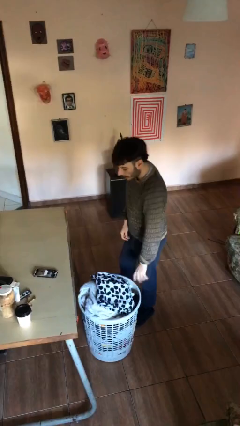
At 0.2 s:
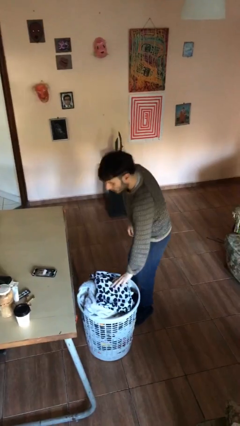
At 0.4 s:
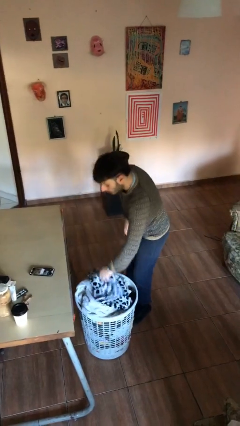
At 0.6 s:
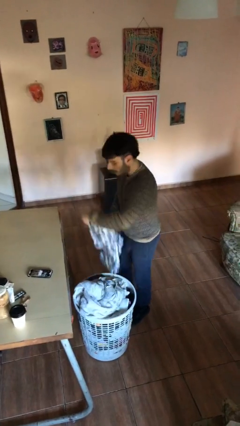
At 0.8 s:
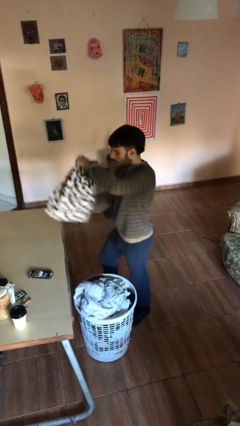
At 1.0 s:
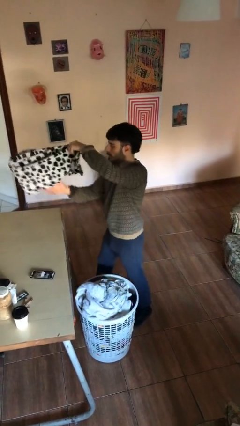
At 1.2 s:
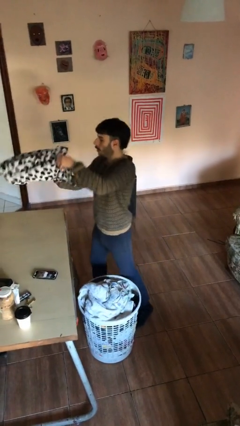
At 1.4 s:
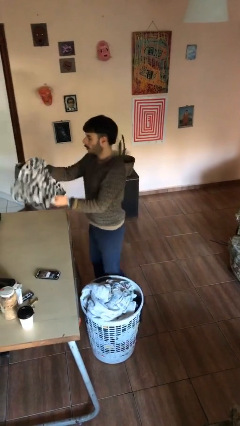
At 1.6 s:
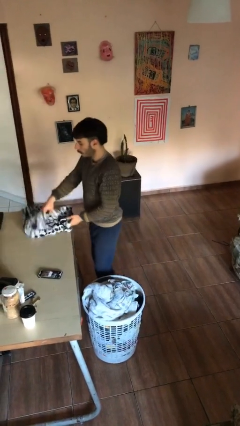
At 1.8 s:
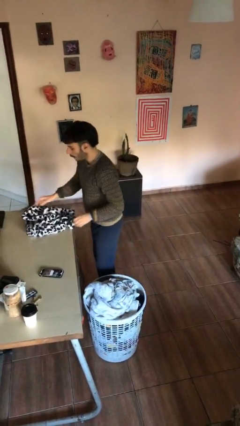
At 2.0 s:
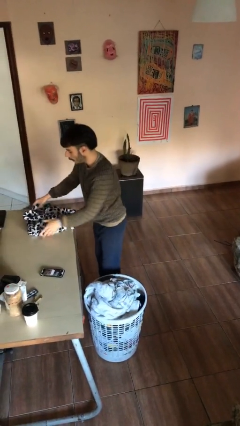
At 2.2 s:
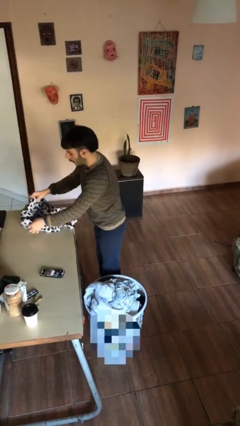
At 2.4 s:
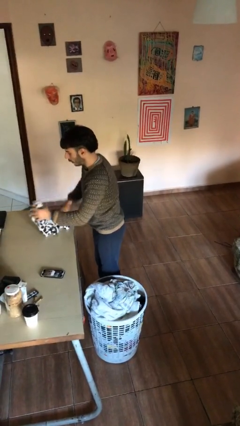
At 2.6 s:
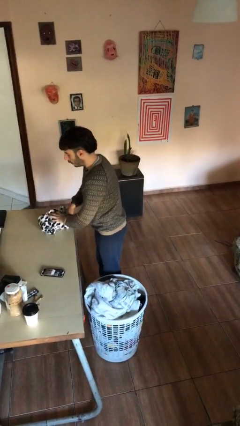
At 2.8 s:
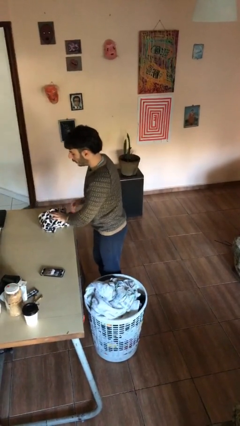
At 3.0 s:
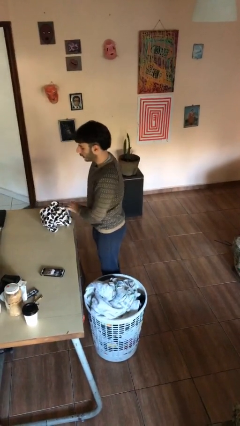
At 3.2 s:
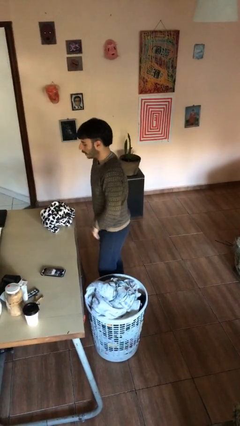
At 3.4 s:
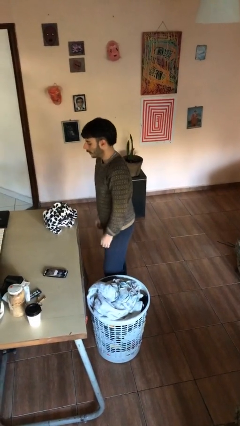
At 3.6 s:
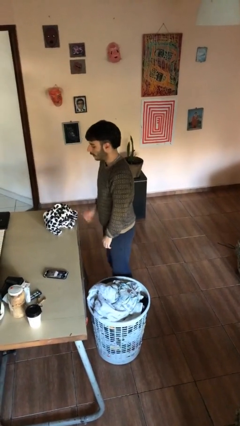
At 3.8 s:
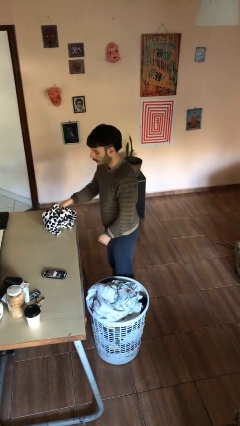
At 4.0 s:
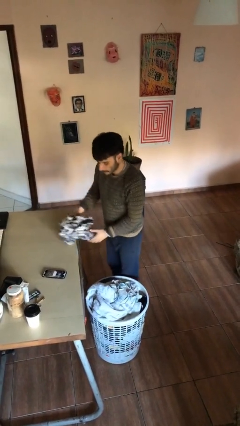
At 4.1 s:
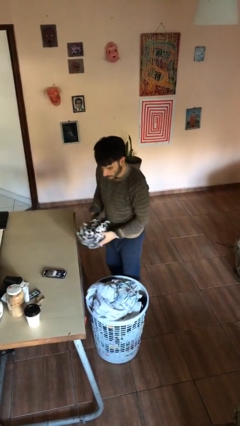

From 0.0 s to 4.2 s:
person folds pants

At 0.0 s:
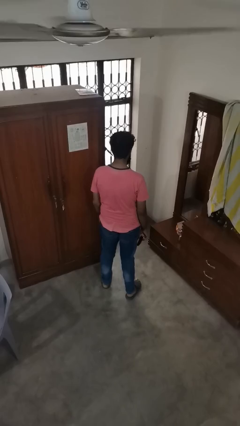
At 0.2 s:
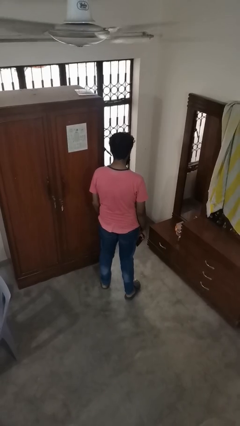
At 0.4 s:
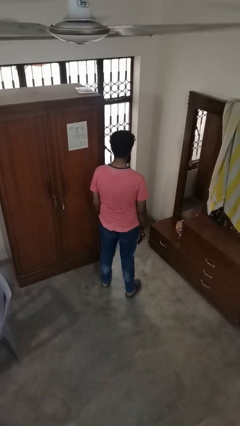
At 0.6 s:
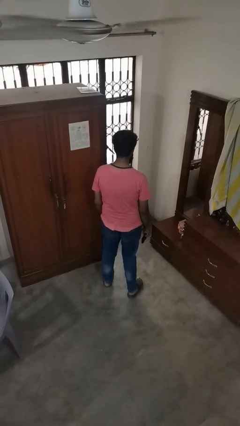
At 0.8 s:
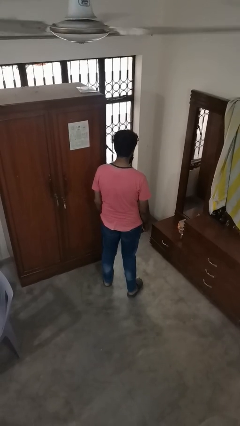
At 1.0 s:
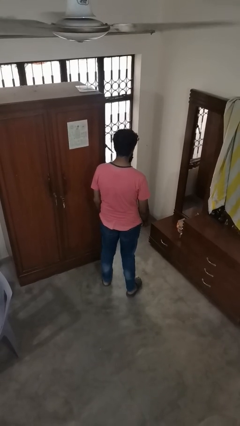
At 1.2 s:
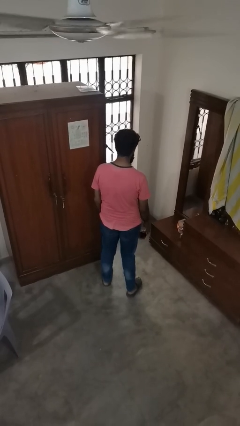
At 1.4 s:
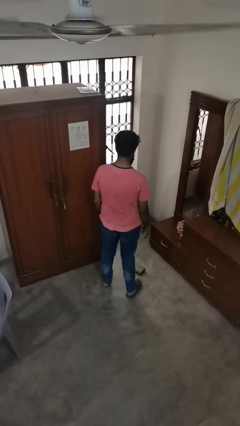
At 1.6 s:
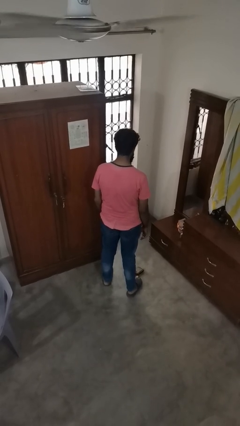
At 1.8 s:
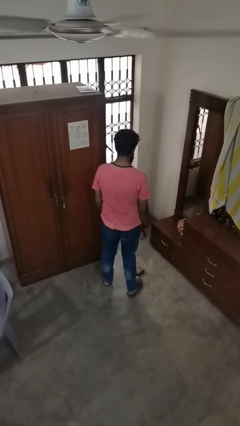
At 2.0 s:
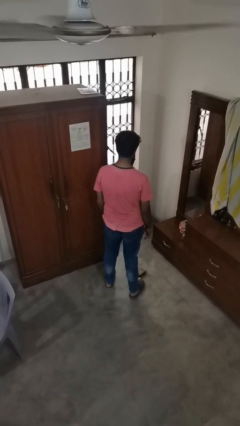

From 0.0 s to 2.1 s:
person throws object to ground

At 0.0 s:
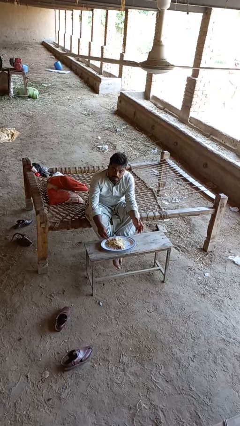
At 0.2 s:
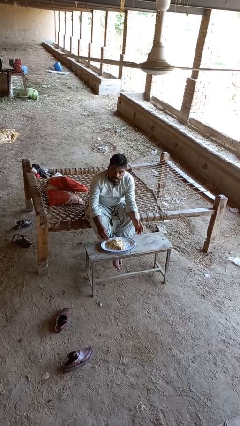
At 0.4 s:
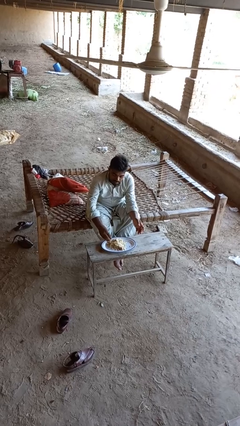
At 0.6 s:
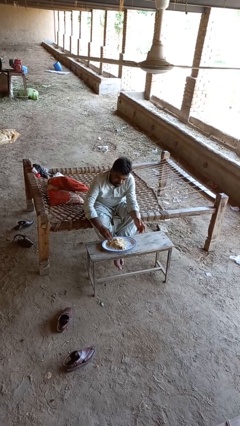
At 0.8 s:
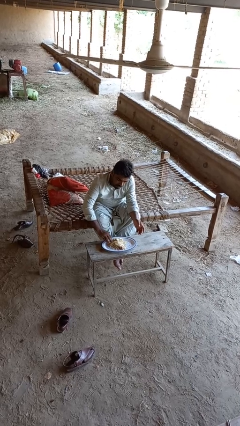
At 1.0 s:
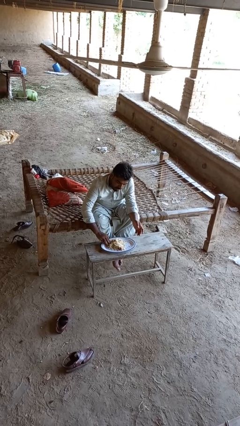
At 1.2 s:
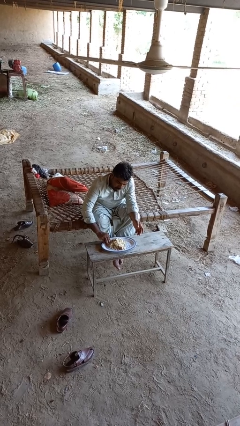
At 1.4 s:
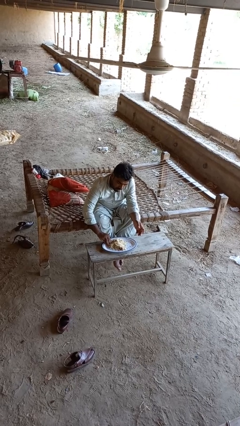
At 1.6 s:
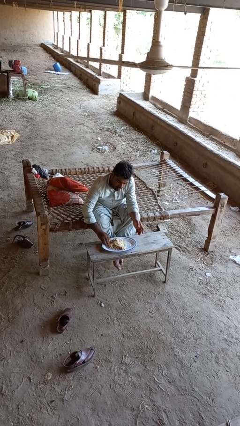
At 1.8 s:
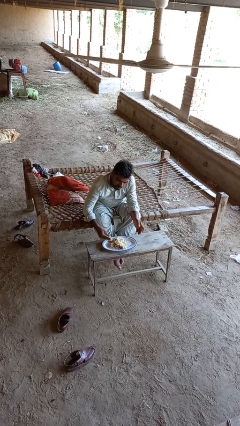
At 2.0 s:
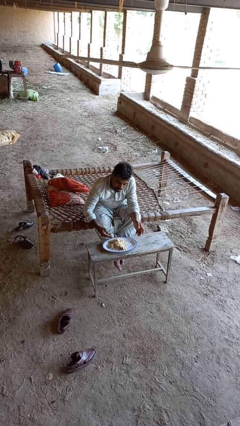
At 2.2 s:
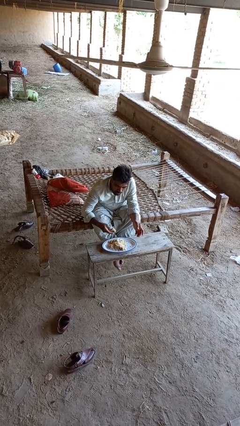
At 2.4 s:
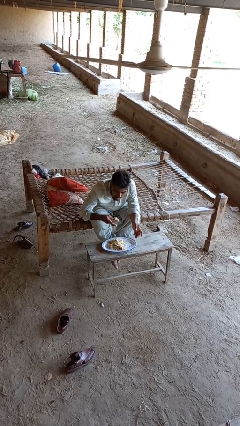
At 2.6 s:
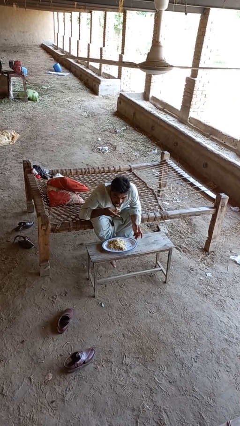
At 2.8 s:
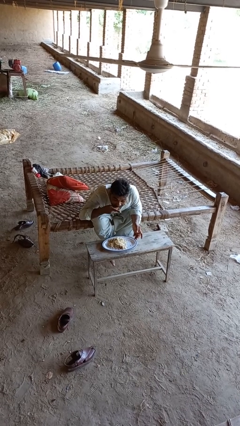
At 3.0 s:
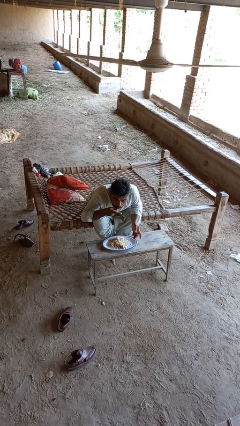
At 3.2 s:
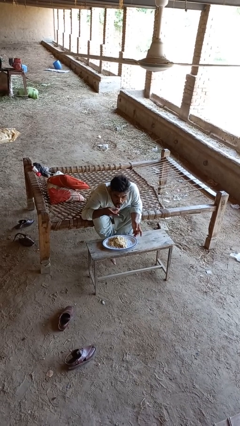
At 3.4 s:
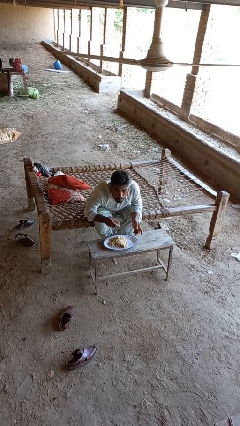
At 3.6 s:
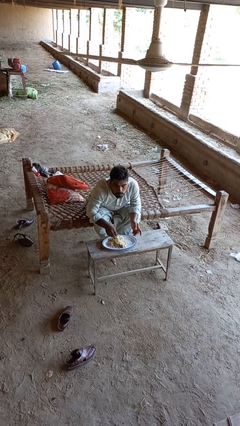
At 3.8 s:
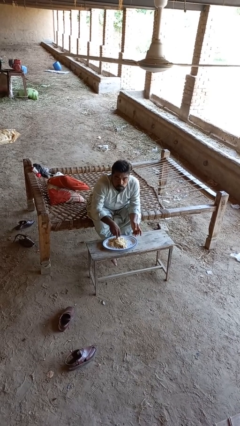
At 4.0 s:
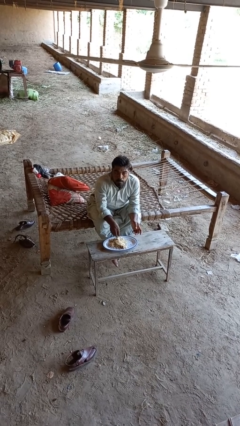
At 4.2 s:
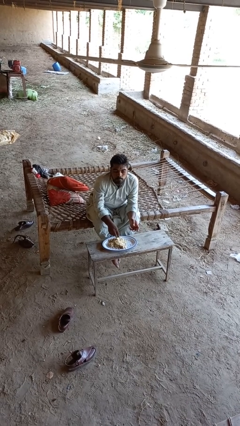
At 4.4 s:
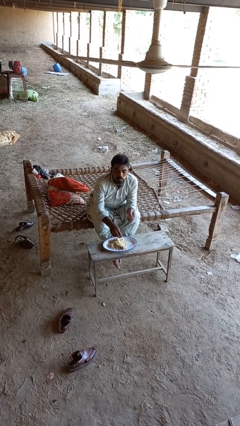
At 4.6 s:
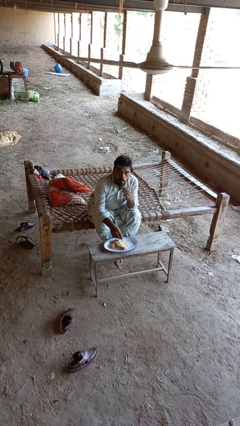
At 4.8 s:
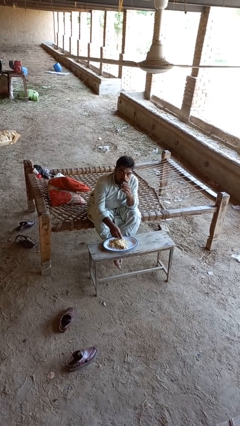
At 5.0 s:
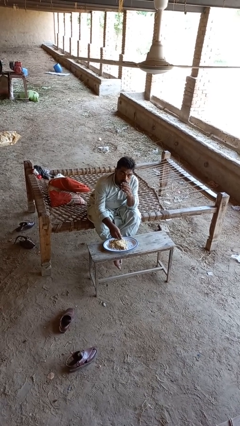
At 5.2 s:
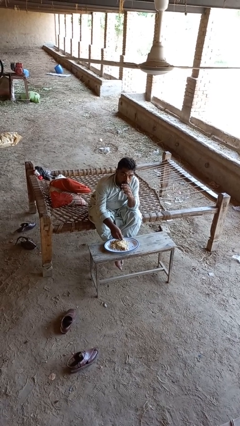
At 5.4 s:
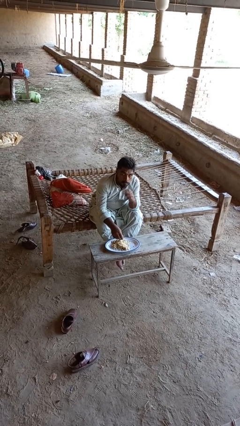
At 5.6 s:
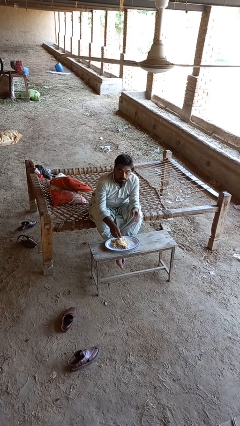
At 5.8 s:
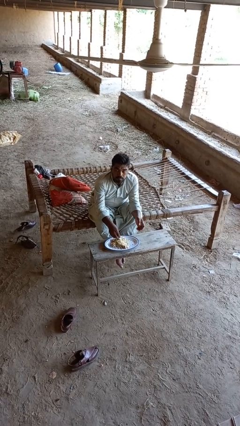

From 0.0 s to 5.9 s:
person eats with hands

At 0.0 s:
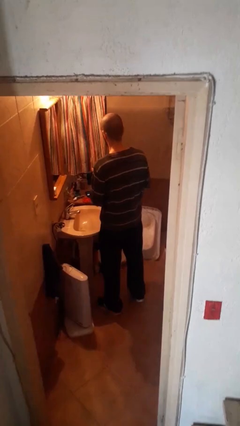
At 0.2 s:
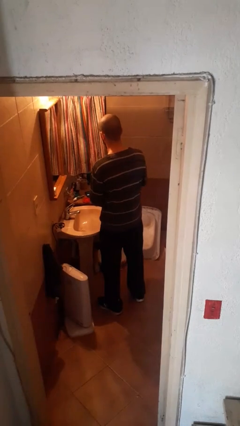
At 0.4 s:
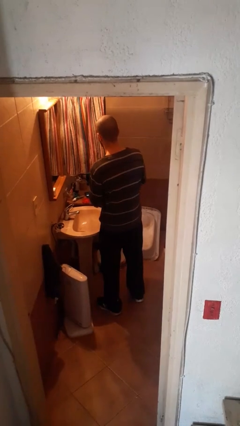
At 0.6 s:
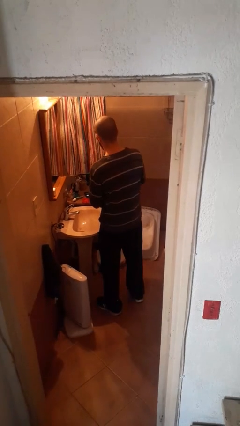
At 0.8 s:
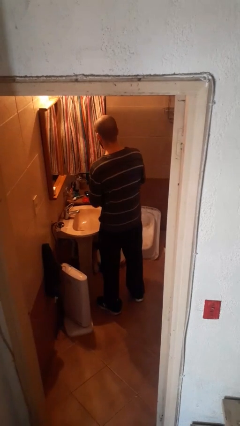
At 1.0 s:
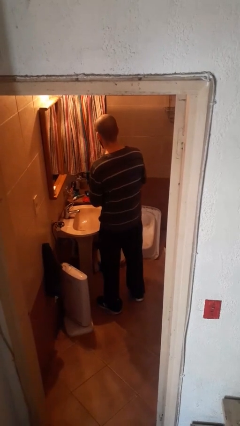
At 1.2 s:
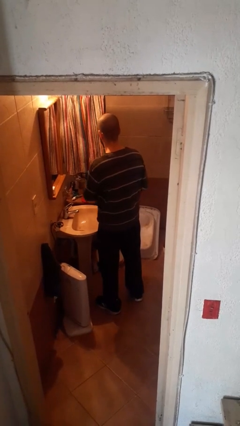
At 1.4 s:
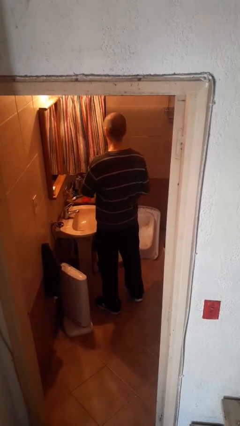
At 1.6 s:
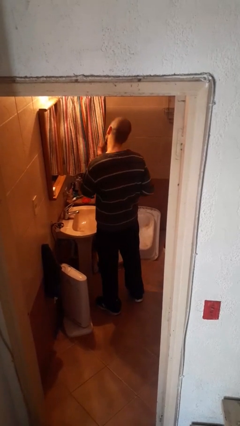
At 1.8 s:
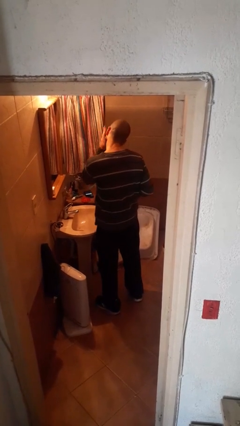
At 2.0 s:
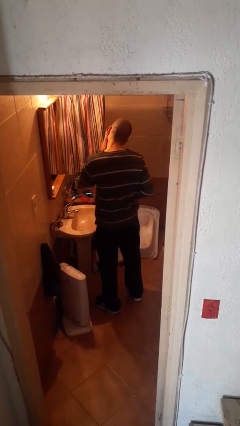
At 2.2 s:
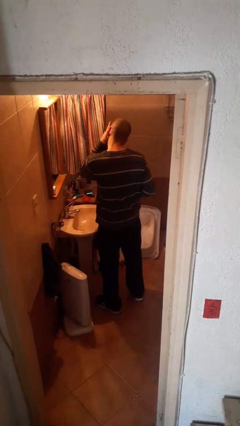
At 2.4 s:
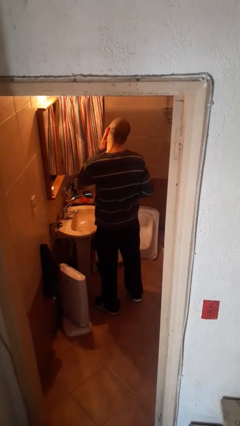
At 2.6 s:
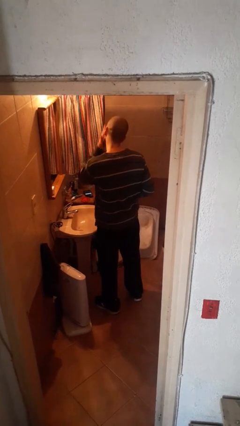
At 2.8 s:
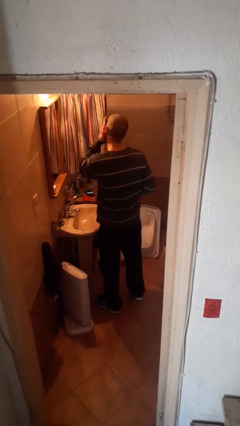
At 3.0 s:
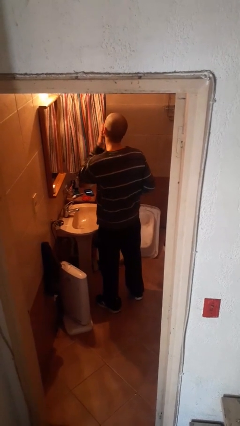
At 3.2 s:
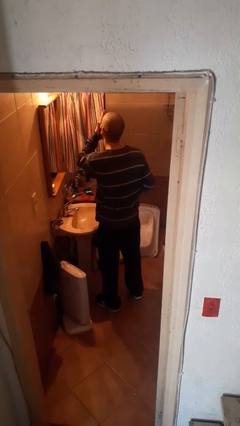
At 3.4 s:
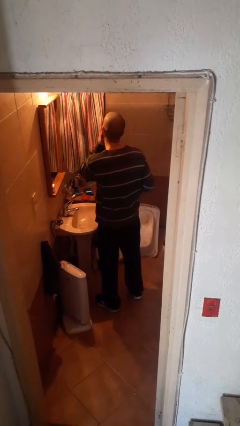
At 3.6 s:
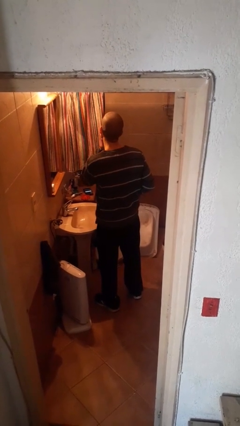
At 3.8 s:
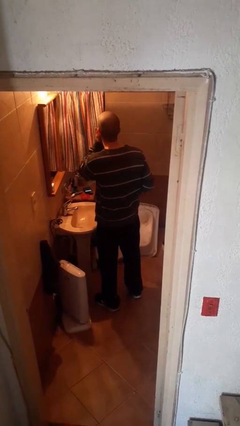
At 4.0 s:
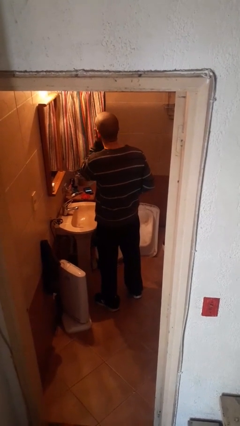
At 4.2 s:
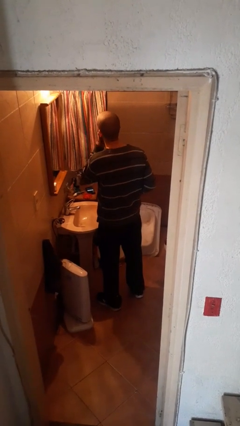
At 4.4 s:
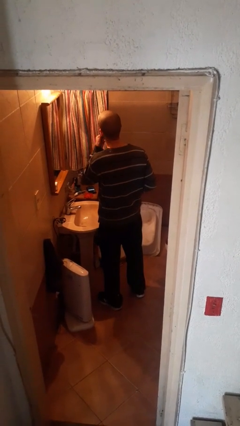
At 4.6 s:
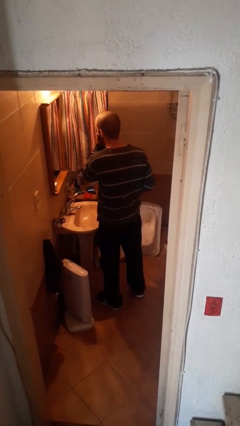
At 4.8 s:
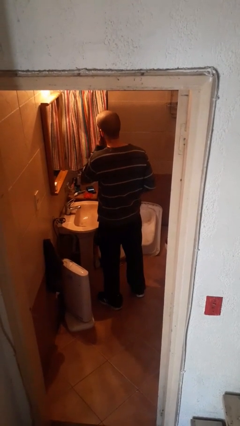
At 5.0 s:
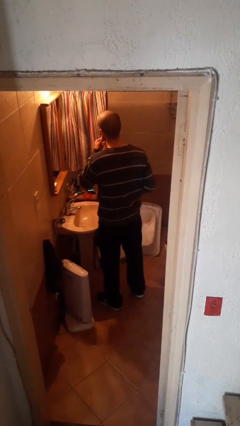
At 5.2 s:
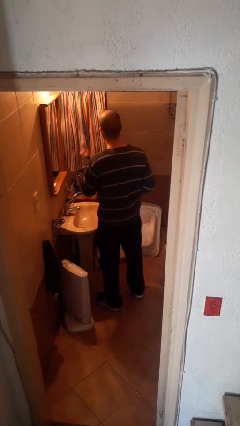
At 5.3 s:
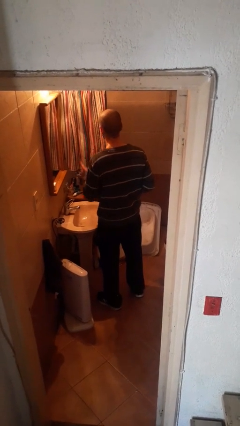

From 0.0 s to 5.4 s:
person applies facial moisturizer

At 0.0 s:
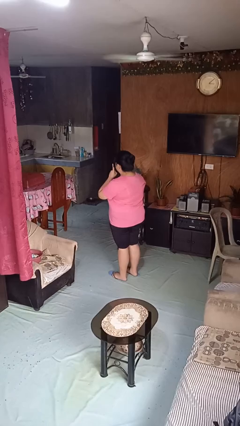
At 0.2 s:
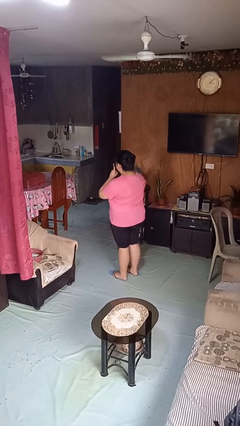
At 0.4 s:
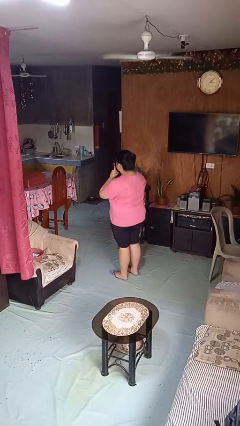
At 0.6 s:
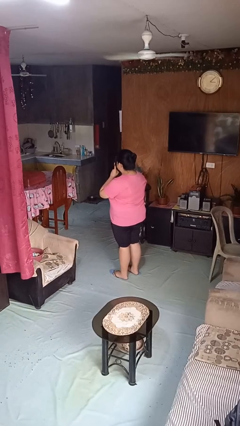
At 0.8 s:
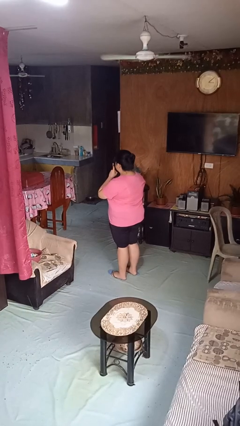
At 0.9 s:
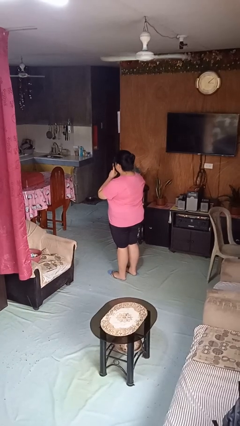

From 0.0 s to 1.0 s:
person gestures be quiet
